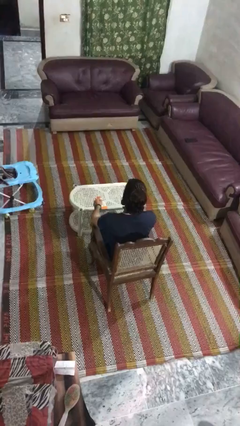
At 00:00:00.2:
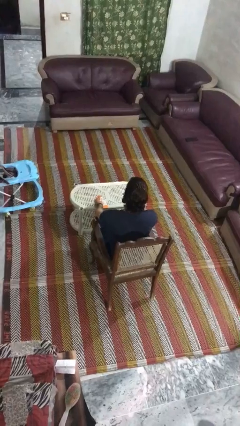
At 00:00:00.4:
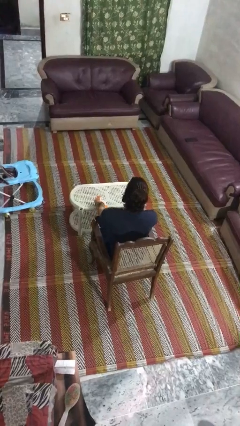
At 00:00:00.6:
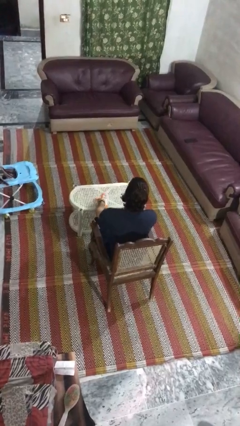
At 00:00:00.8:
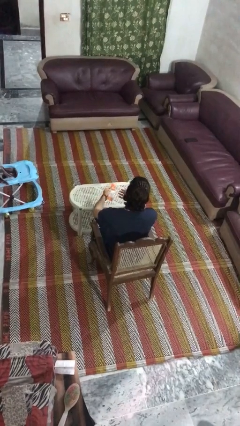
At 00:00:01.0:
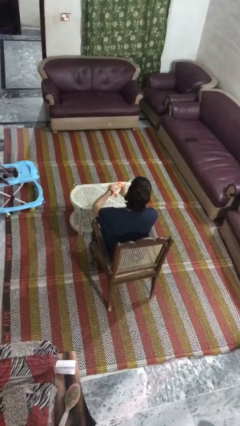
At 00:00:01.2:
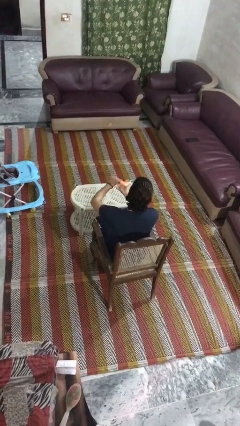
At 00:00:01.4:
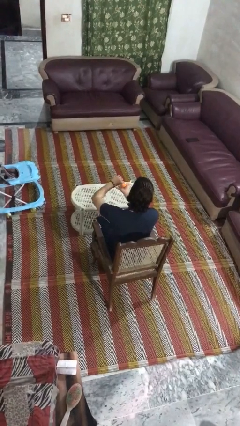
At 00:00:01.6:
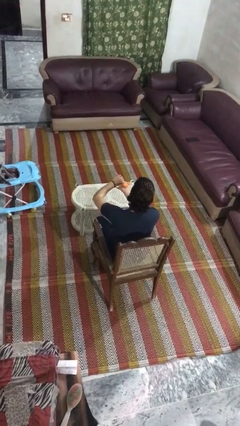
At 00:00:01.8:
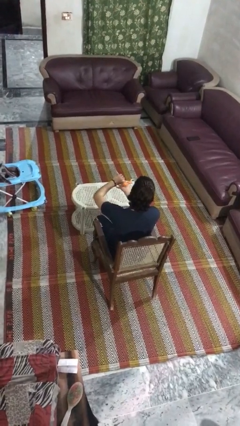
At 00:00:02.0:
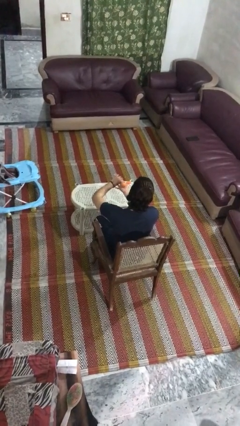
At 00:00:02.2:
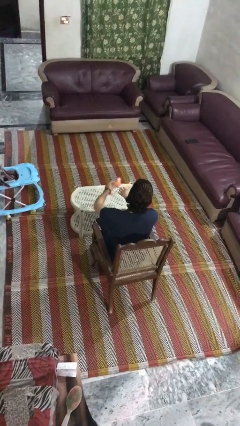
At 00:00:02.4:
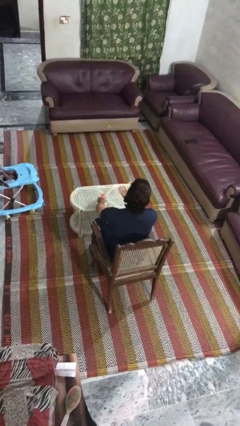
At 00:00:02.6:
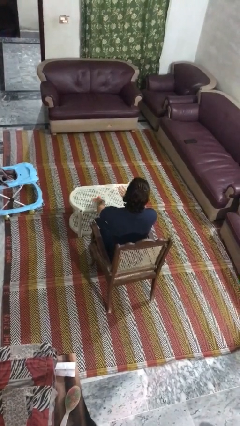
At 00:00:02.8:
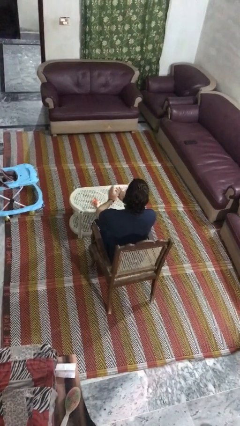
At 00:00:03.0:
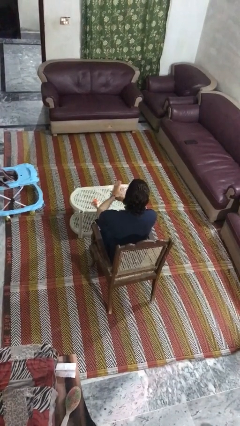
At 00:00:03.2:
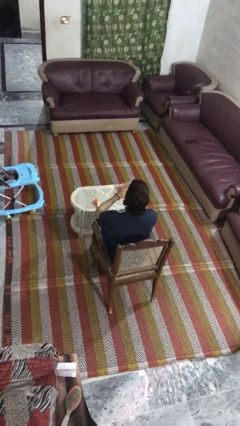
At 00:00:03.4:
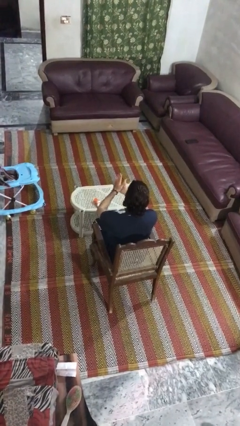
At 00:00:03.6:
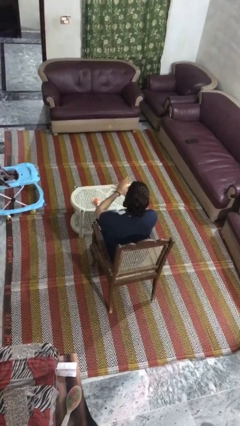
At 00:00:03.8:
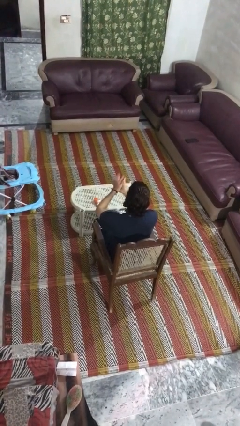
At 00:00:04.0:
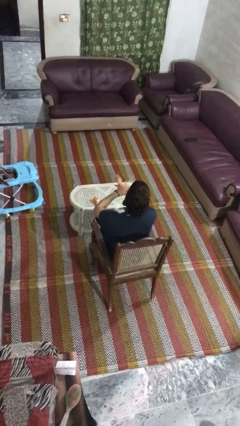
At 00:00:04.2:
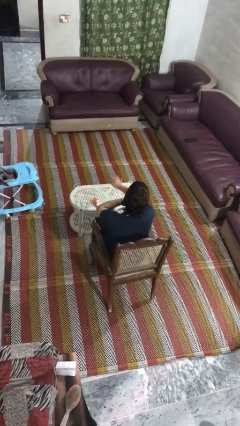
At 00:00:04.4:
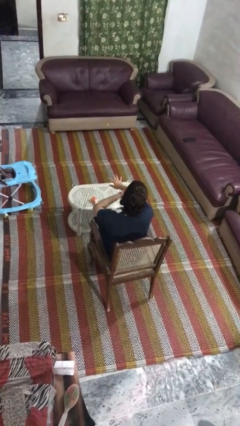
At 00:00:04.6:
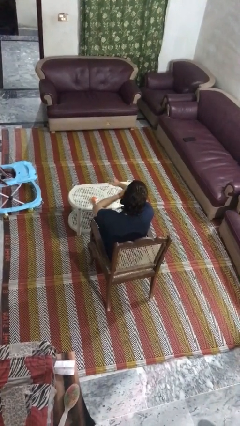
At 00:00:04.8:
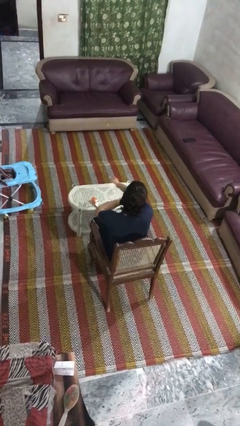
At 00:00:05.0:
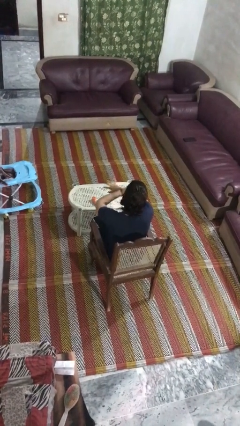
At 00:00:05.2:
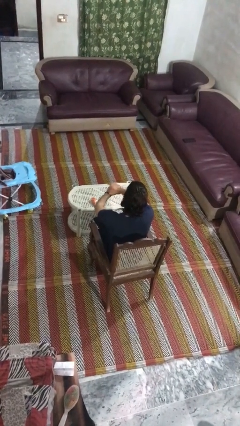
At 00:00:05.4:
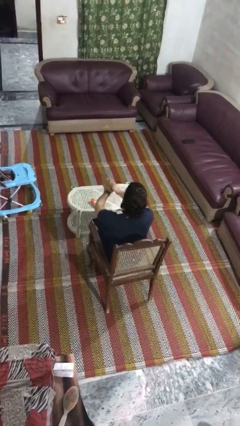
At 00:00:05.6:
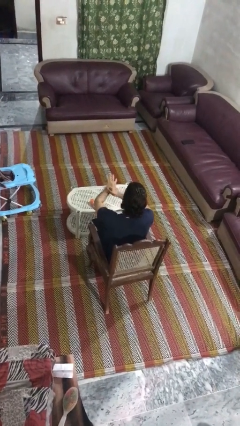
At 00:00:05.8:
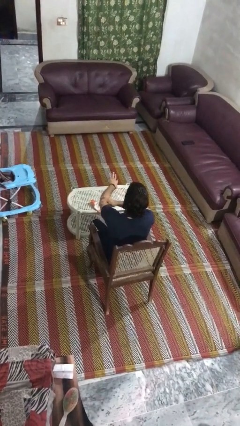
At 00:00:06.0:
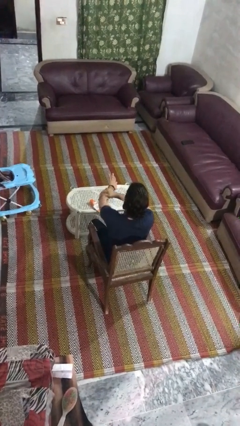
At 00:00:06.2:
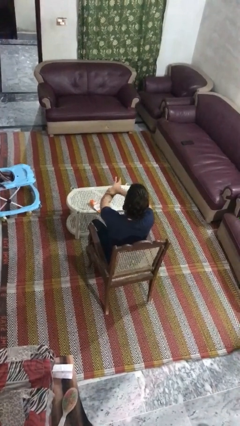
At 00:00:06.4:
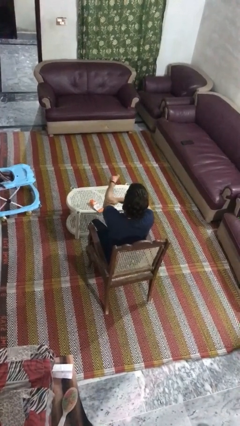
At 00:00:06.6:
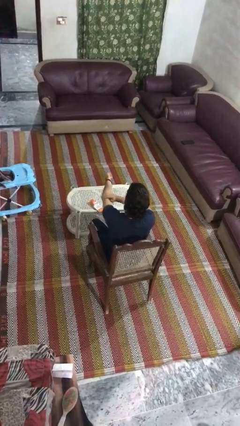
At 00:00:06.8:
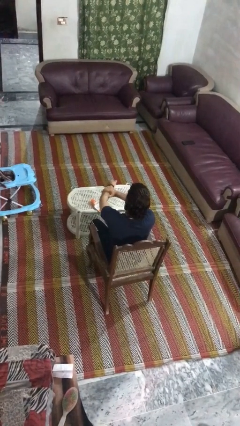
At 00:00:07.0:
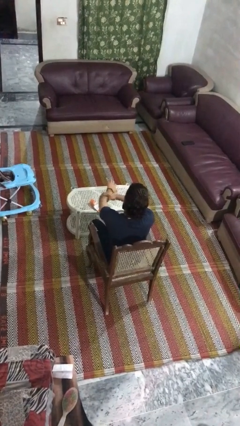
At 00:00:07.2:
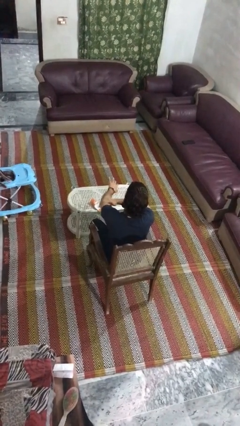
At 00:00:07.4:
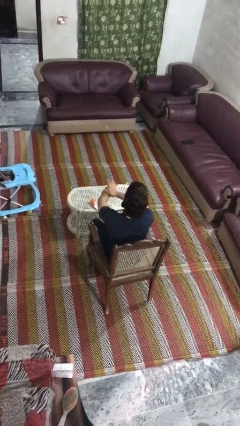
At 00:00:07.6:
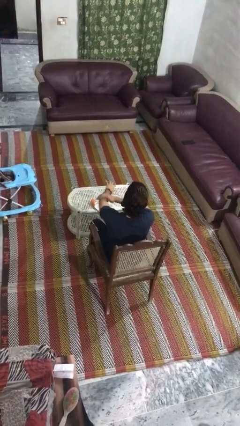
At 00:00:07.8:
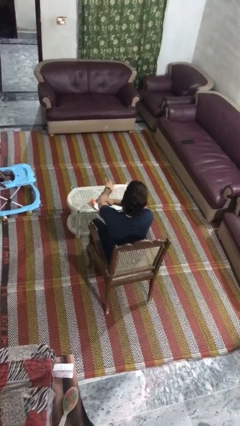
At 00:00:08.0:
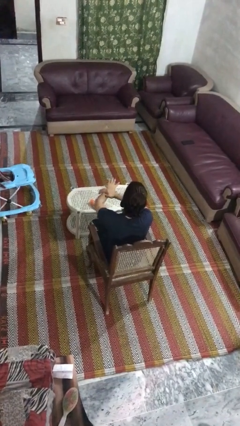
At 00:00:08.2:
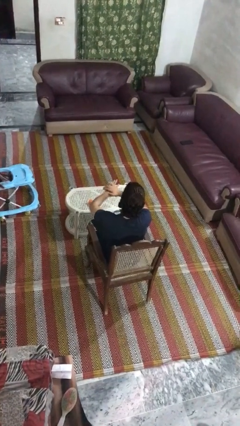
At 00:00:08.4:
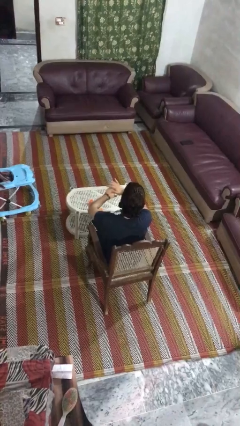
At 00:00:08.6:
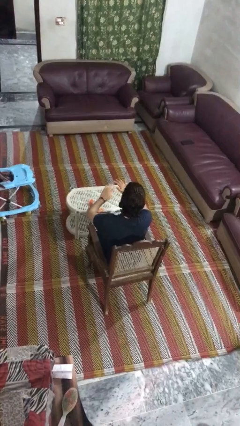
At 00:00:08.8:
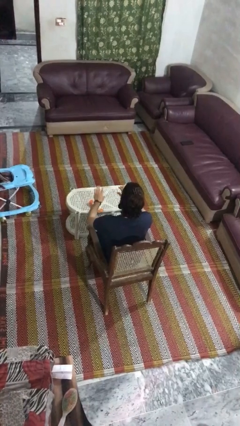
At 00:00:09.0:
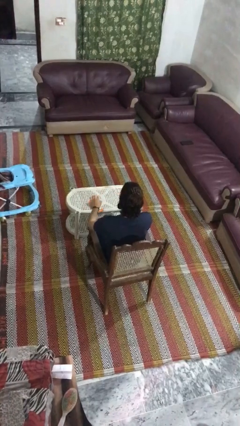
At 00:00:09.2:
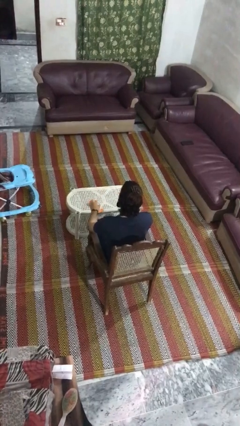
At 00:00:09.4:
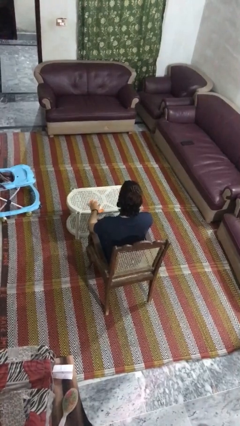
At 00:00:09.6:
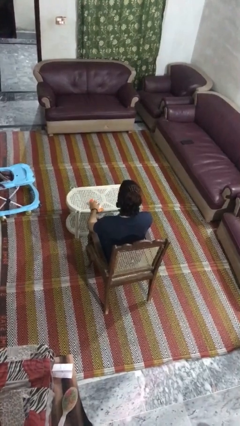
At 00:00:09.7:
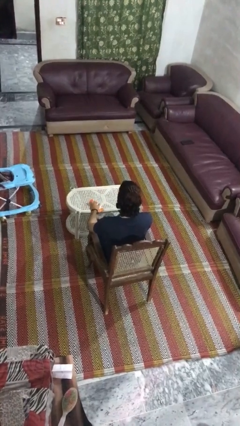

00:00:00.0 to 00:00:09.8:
person applies sunscreen

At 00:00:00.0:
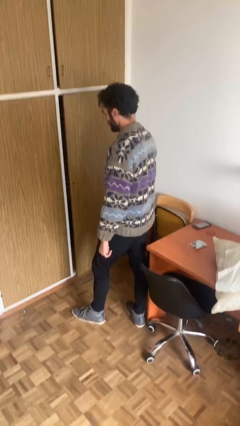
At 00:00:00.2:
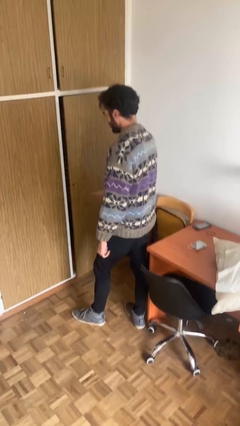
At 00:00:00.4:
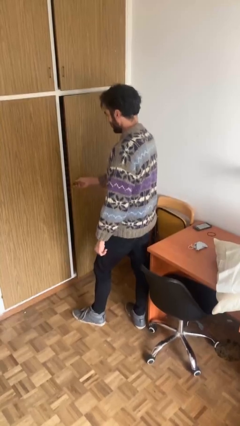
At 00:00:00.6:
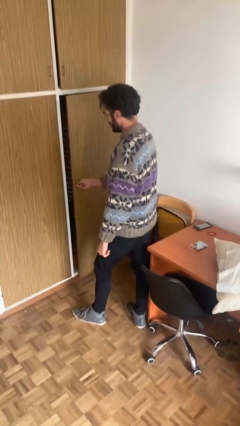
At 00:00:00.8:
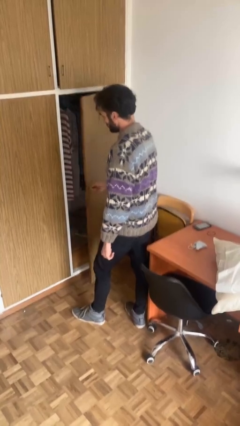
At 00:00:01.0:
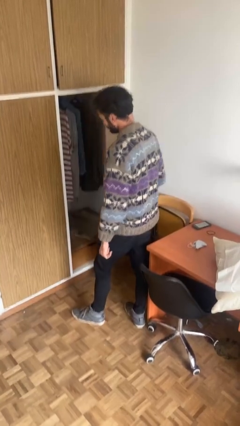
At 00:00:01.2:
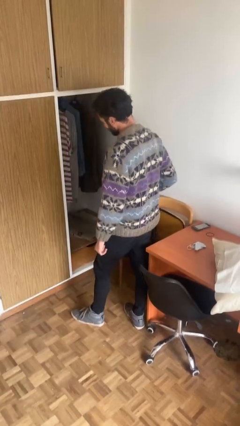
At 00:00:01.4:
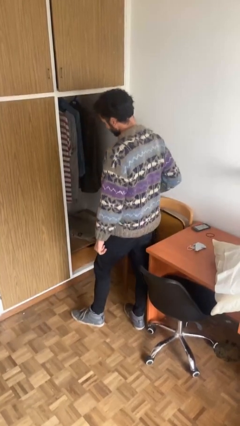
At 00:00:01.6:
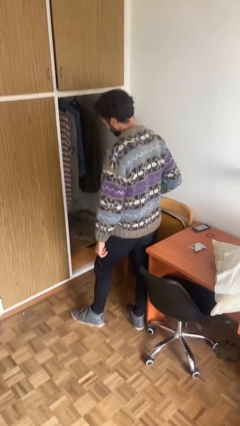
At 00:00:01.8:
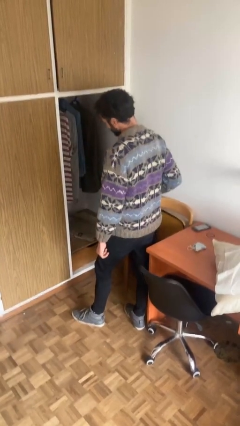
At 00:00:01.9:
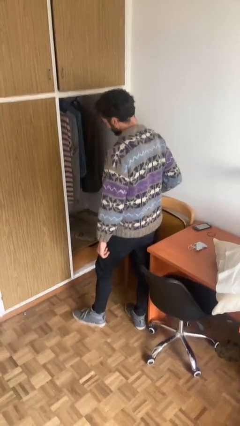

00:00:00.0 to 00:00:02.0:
person opens closet door

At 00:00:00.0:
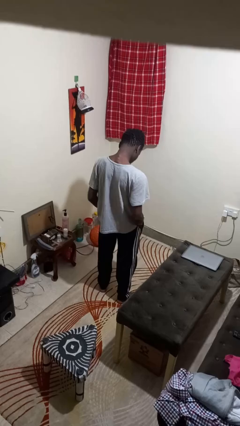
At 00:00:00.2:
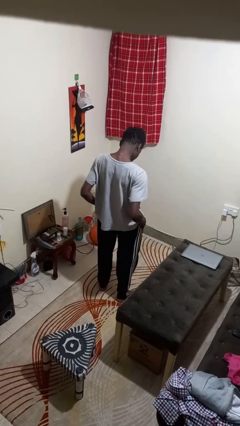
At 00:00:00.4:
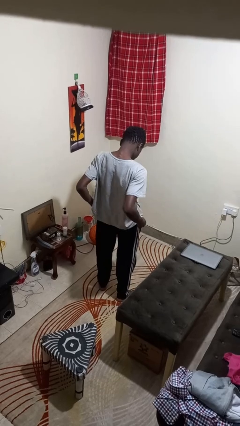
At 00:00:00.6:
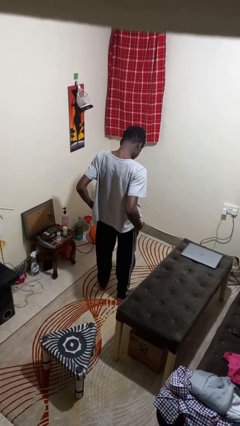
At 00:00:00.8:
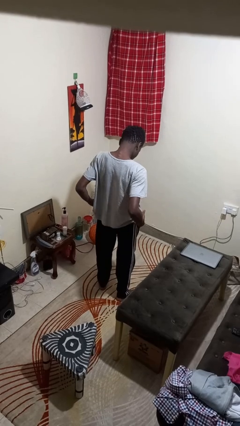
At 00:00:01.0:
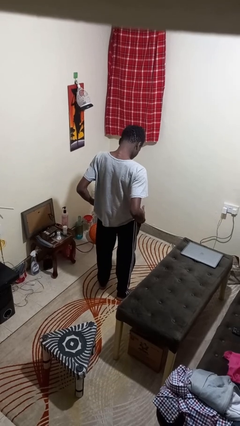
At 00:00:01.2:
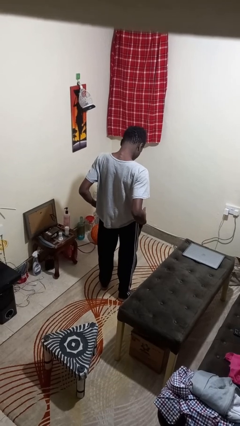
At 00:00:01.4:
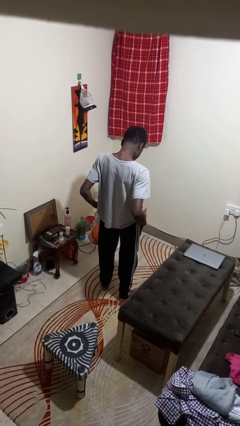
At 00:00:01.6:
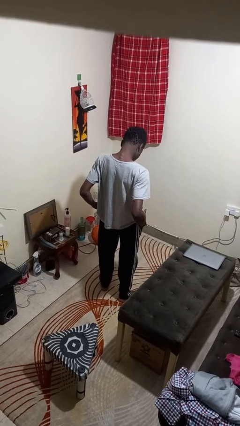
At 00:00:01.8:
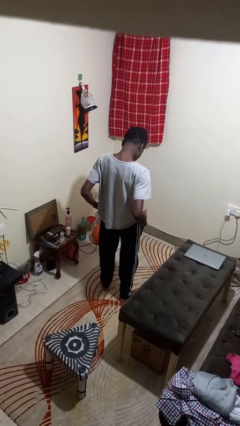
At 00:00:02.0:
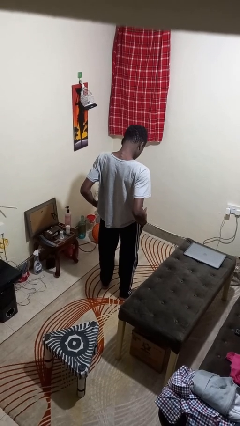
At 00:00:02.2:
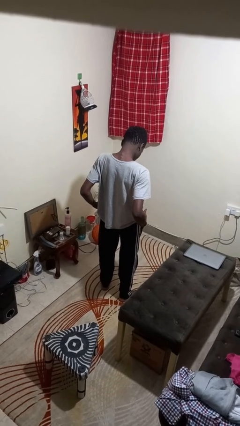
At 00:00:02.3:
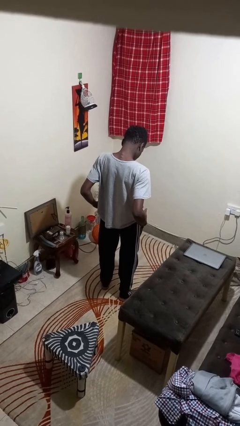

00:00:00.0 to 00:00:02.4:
person puts hands in back pockets

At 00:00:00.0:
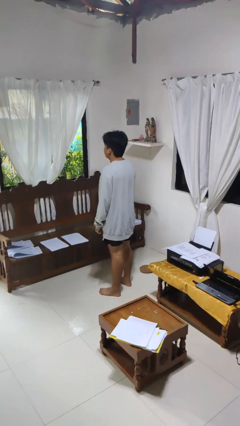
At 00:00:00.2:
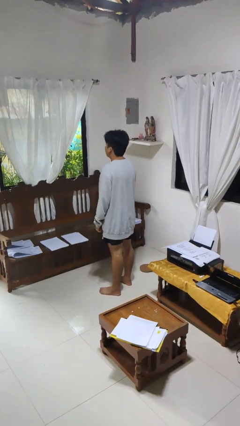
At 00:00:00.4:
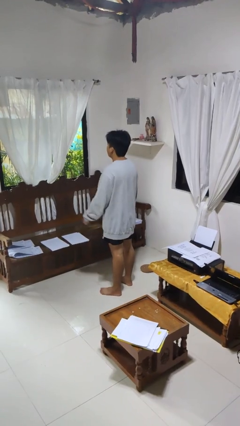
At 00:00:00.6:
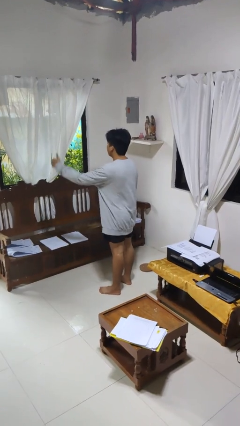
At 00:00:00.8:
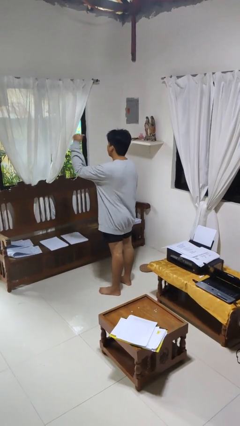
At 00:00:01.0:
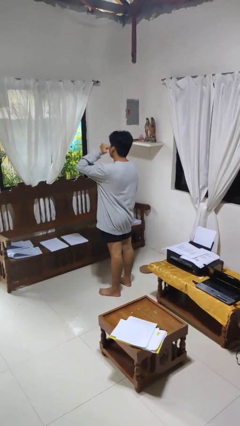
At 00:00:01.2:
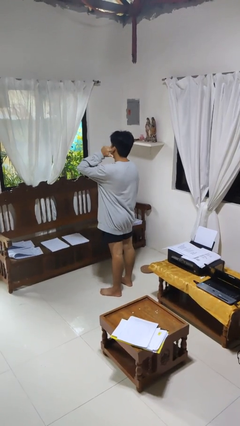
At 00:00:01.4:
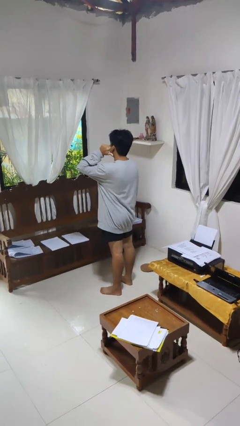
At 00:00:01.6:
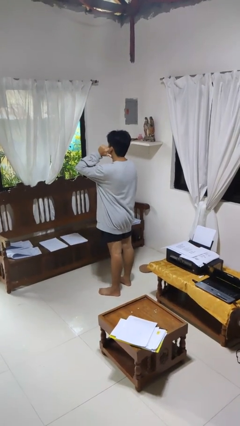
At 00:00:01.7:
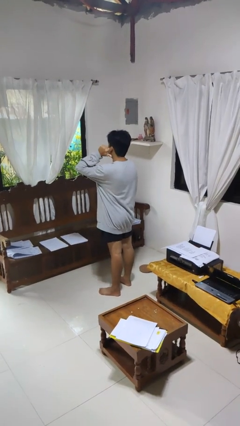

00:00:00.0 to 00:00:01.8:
person gestures behind me

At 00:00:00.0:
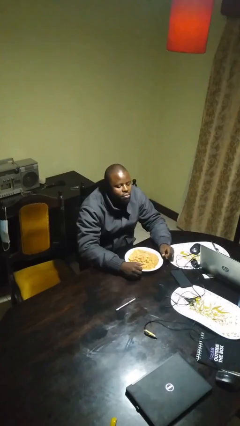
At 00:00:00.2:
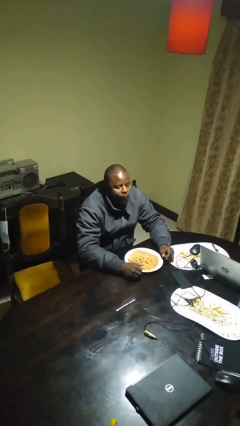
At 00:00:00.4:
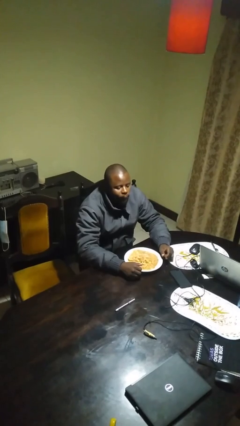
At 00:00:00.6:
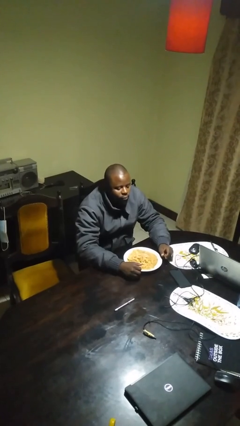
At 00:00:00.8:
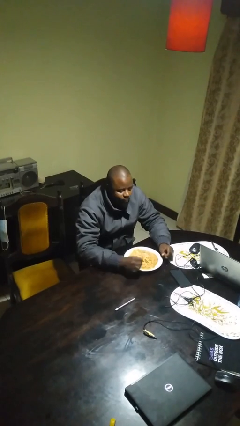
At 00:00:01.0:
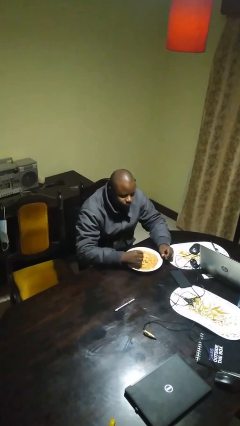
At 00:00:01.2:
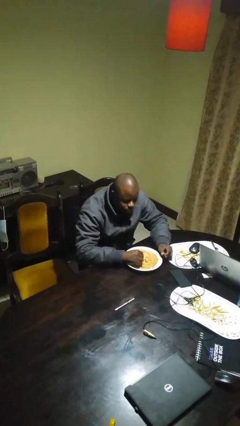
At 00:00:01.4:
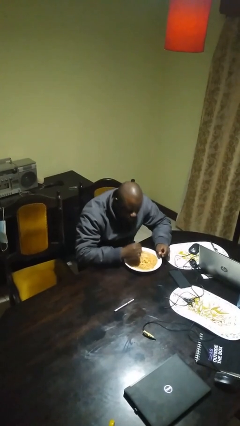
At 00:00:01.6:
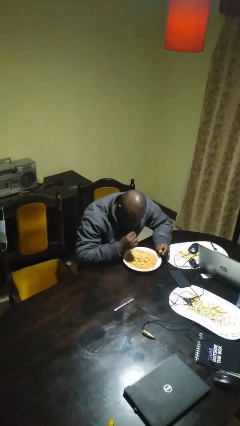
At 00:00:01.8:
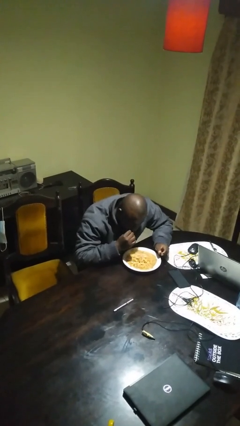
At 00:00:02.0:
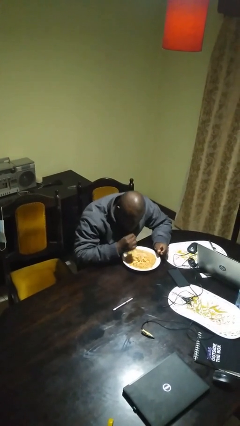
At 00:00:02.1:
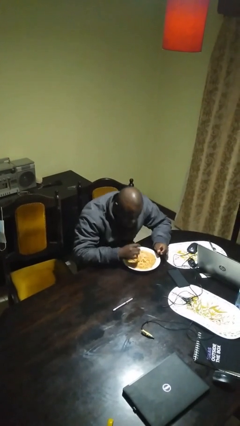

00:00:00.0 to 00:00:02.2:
person eats with hands
